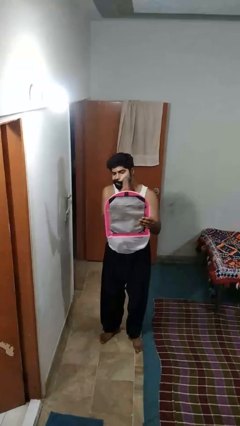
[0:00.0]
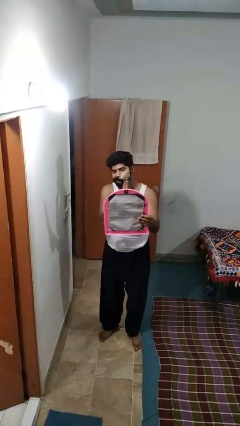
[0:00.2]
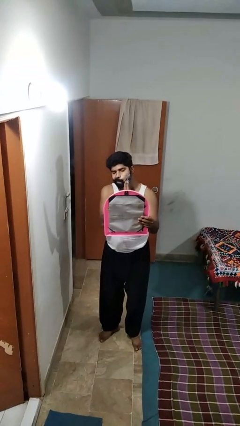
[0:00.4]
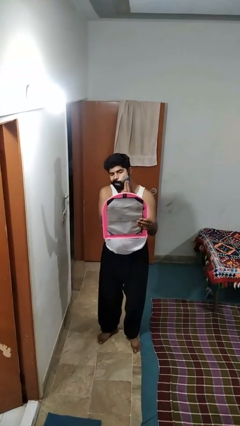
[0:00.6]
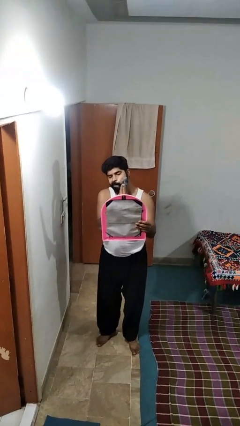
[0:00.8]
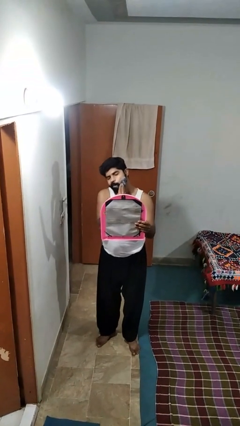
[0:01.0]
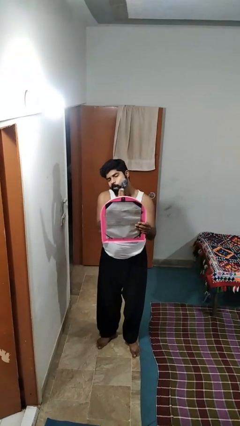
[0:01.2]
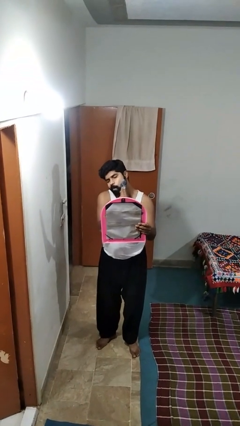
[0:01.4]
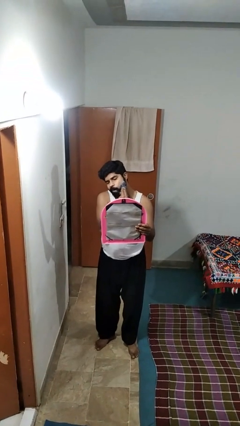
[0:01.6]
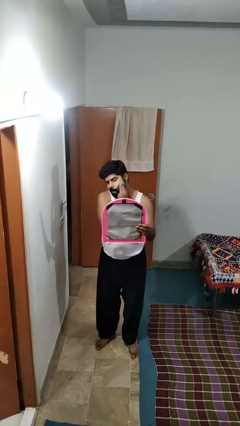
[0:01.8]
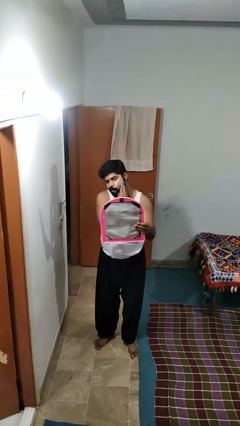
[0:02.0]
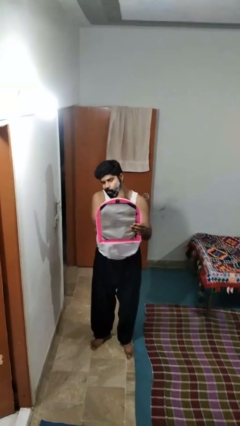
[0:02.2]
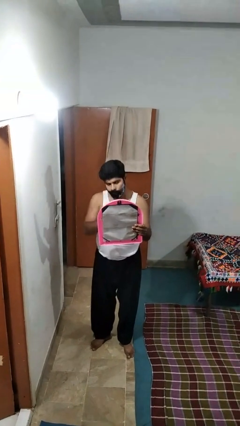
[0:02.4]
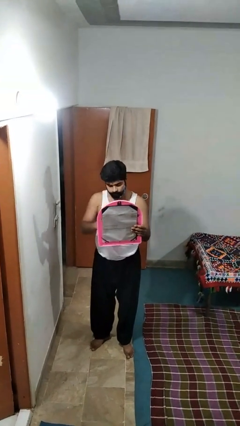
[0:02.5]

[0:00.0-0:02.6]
person applies shaving cream

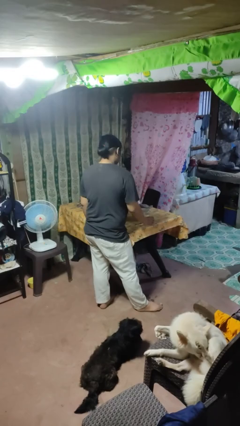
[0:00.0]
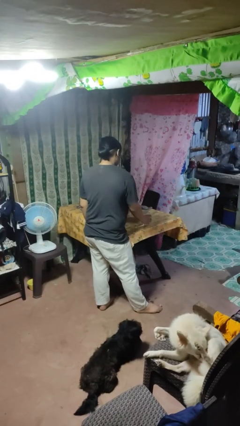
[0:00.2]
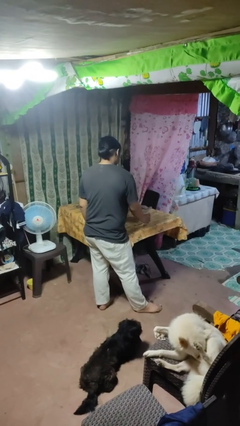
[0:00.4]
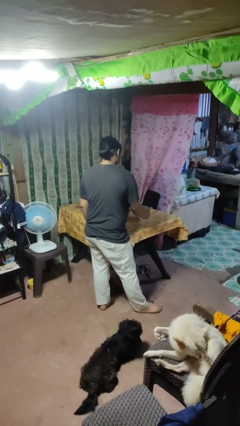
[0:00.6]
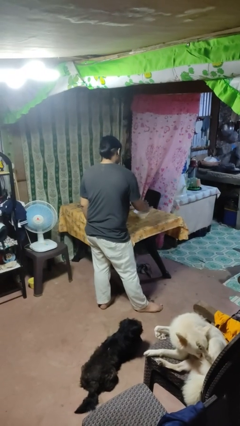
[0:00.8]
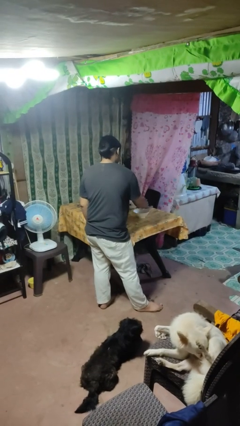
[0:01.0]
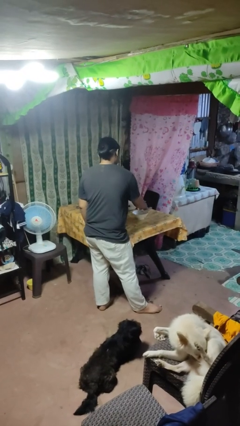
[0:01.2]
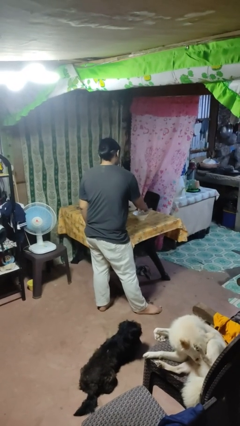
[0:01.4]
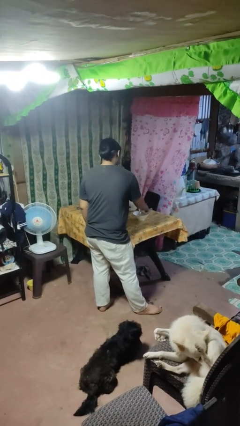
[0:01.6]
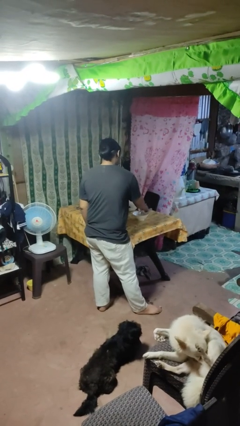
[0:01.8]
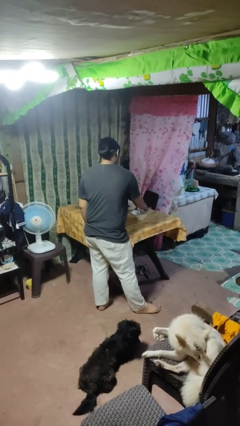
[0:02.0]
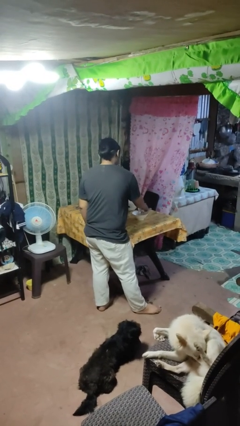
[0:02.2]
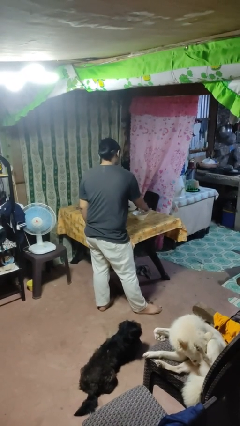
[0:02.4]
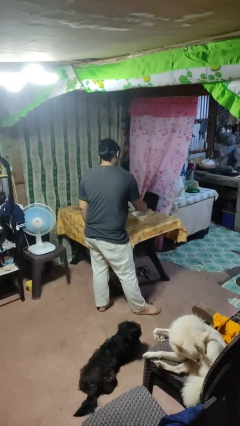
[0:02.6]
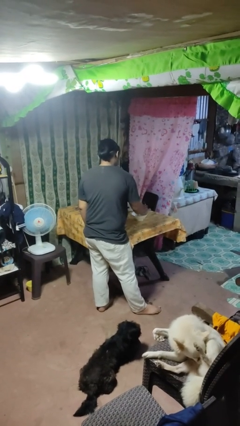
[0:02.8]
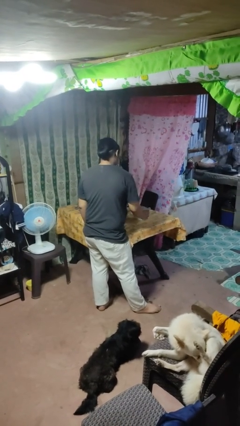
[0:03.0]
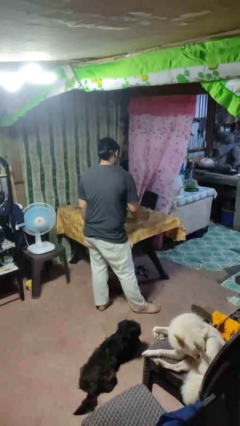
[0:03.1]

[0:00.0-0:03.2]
person pours into bowl

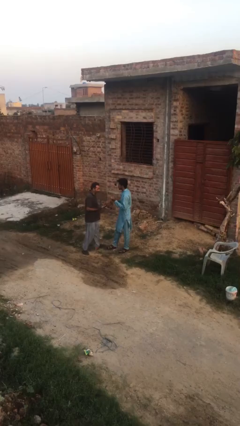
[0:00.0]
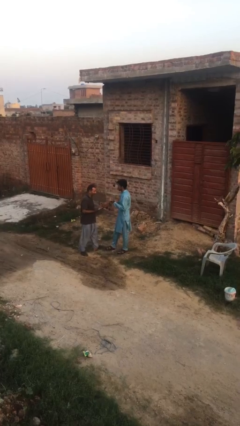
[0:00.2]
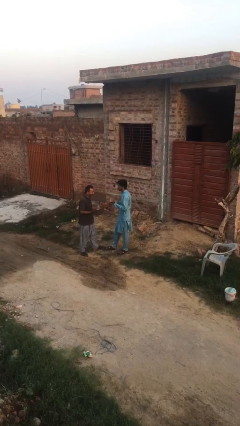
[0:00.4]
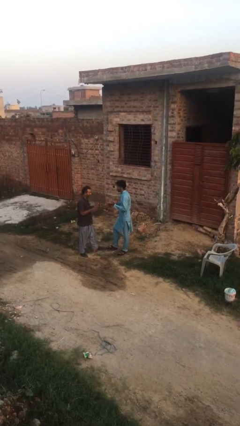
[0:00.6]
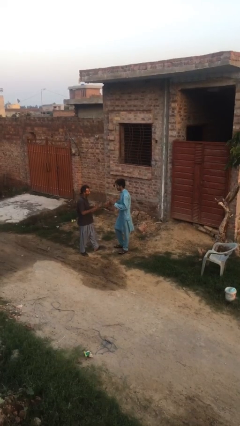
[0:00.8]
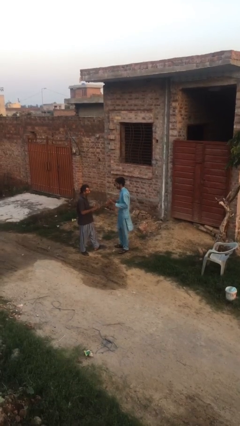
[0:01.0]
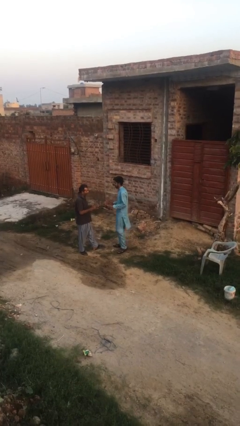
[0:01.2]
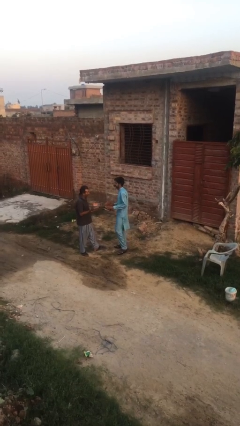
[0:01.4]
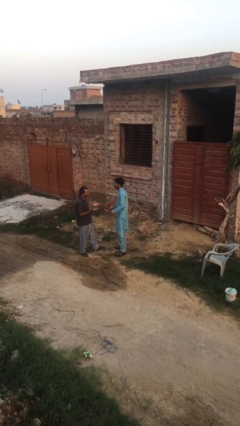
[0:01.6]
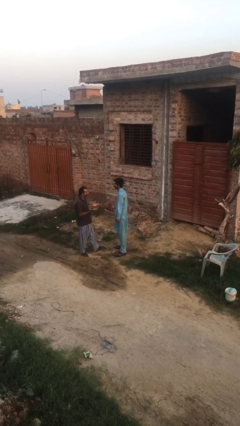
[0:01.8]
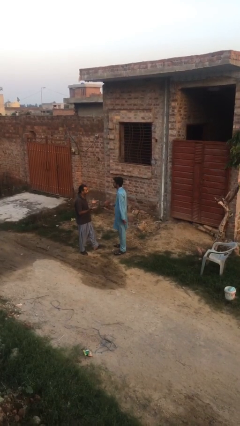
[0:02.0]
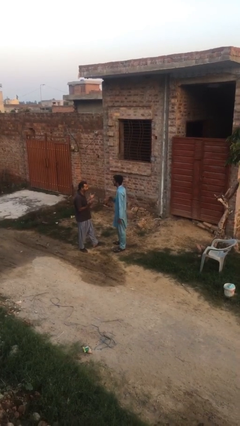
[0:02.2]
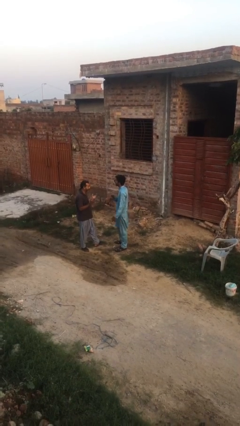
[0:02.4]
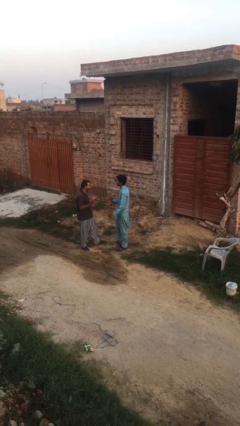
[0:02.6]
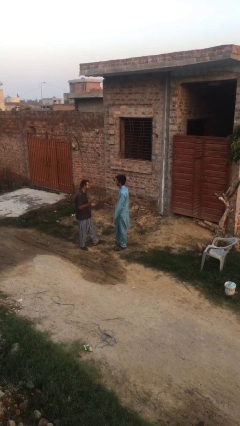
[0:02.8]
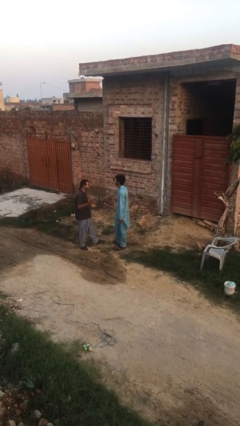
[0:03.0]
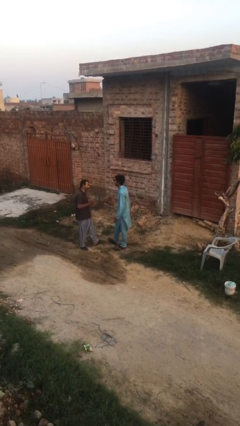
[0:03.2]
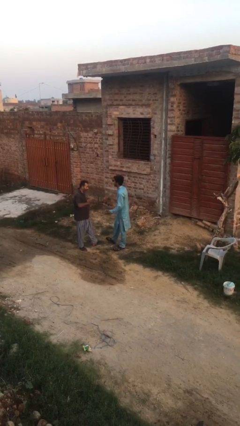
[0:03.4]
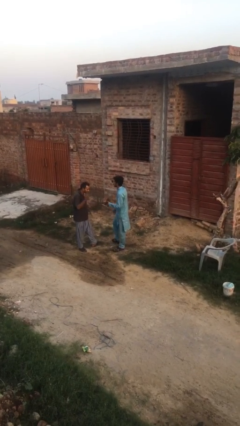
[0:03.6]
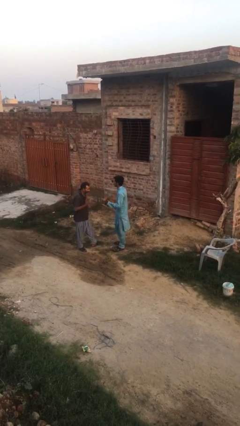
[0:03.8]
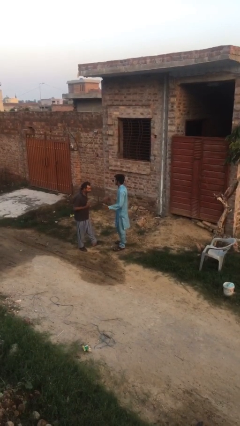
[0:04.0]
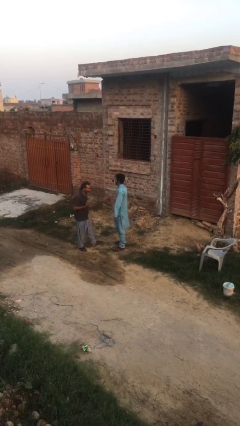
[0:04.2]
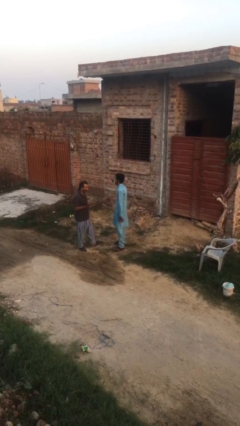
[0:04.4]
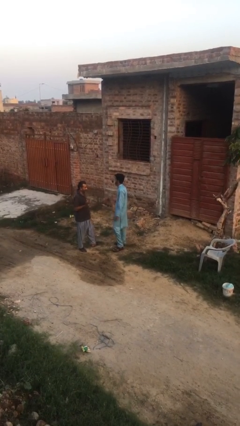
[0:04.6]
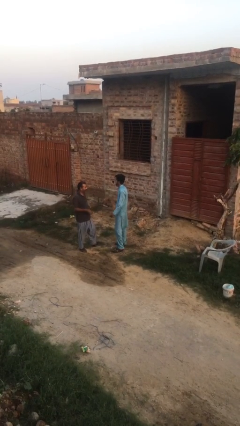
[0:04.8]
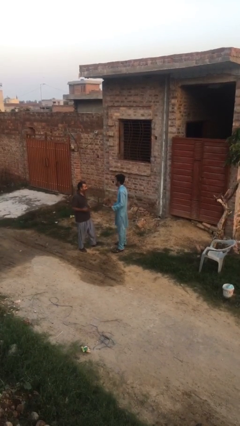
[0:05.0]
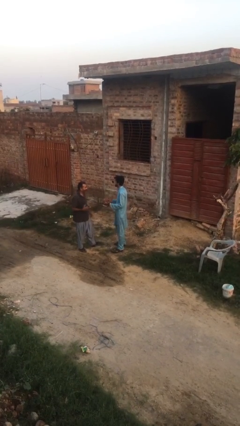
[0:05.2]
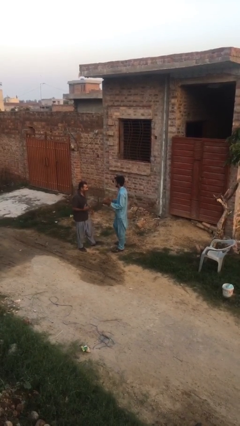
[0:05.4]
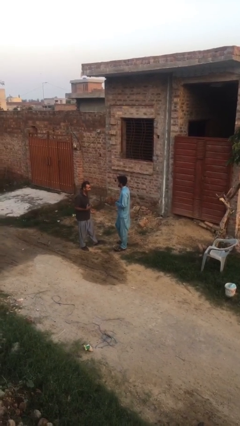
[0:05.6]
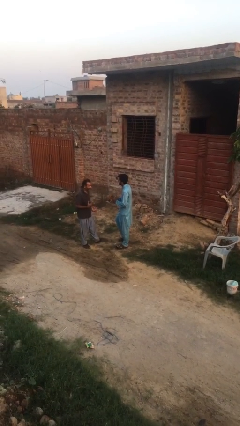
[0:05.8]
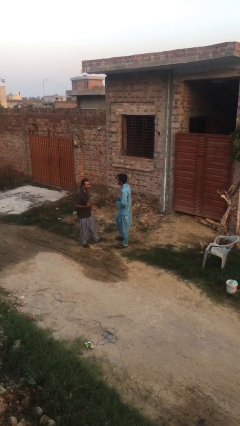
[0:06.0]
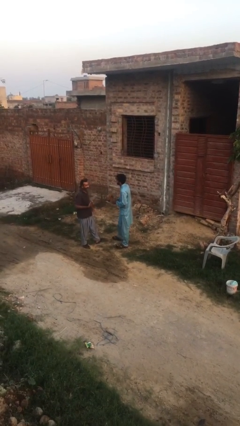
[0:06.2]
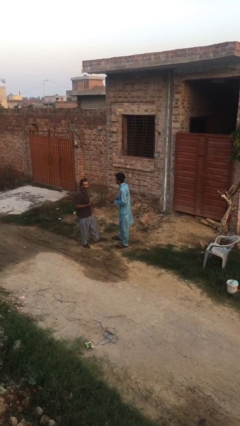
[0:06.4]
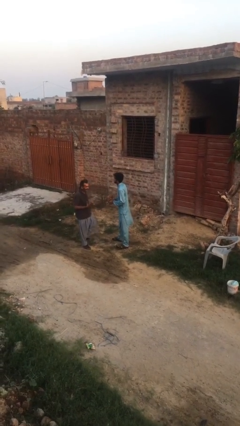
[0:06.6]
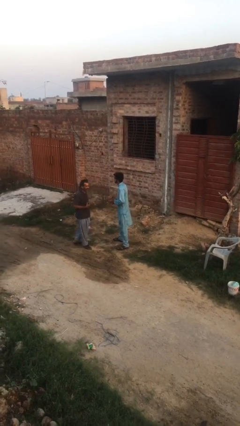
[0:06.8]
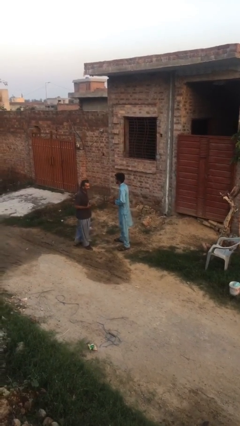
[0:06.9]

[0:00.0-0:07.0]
person talks to person

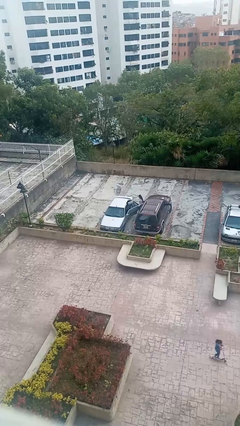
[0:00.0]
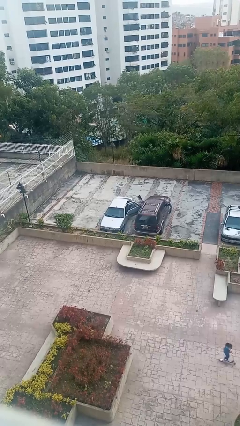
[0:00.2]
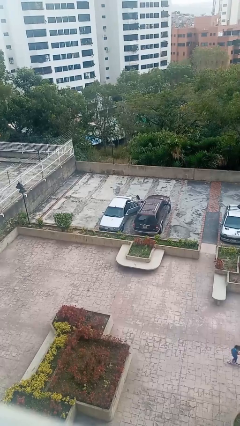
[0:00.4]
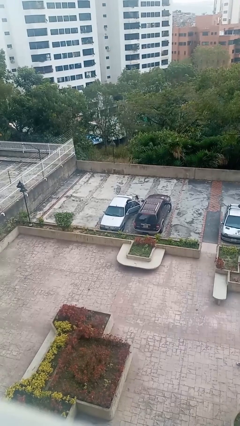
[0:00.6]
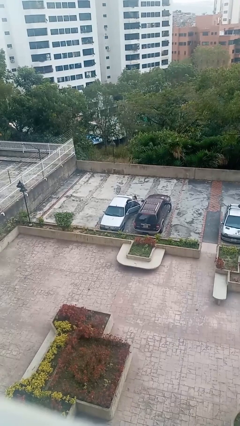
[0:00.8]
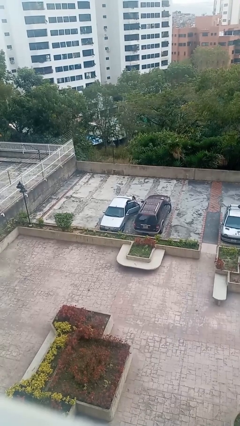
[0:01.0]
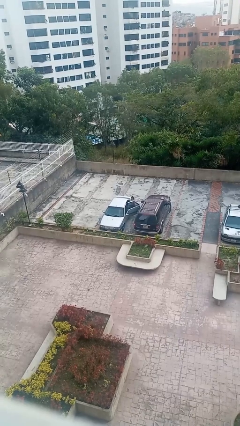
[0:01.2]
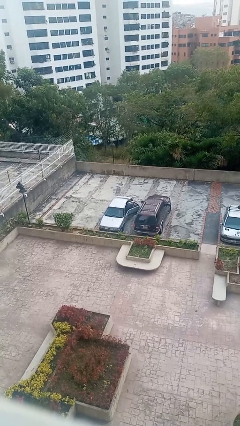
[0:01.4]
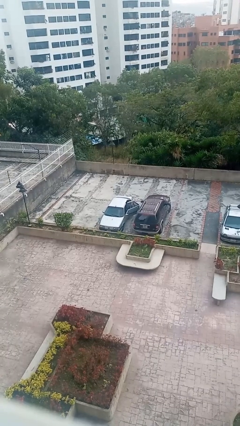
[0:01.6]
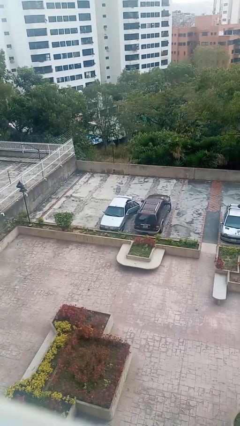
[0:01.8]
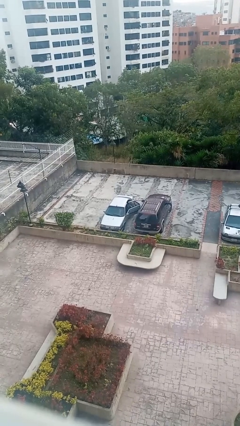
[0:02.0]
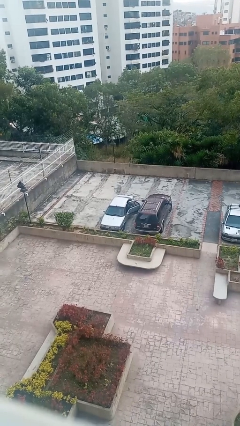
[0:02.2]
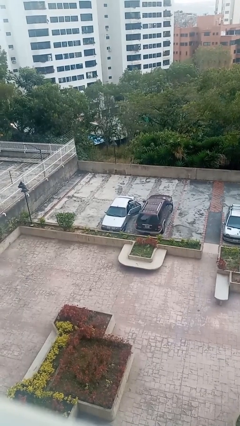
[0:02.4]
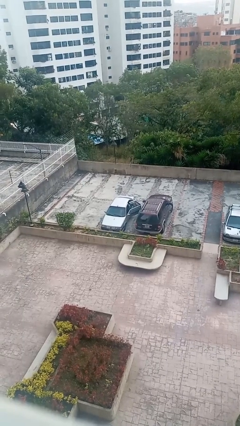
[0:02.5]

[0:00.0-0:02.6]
car picks up person

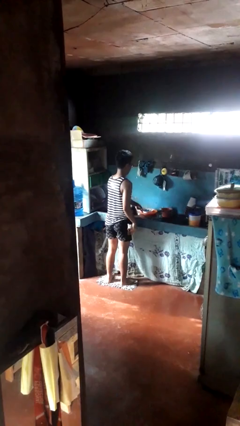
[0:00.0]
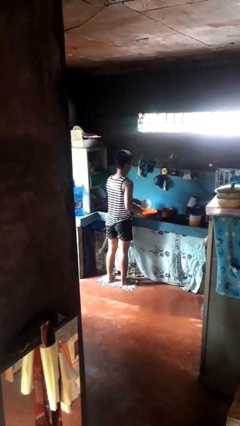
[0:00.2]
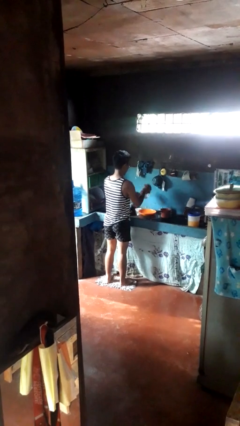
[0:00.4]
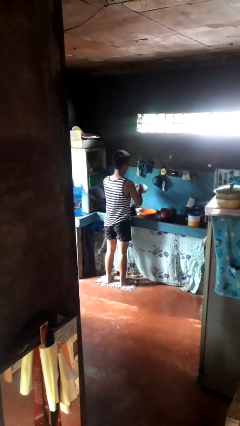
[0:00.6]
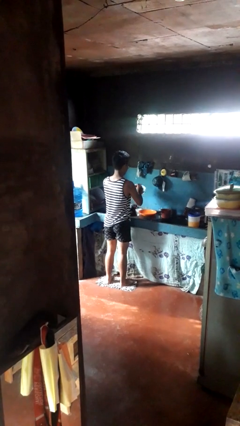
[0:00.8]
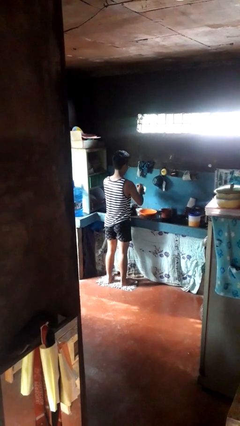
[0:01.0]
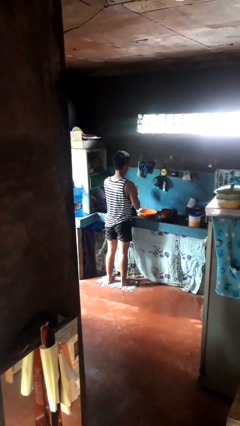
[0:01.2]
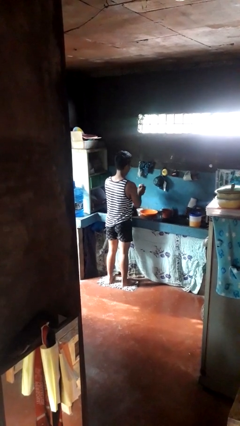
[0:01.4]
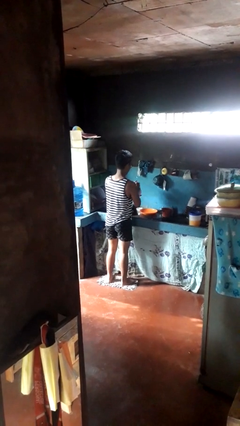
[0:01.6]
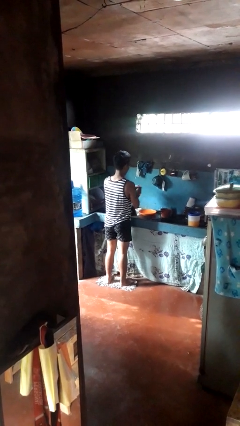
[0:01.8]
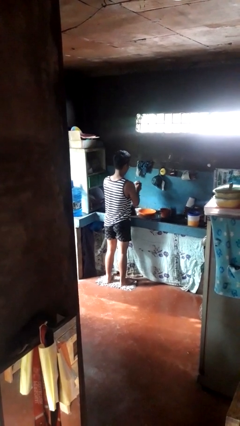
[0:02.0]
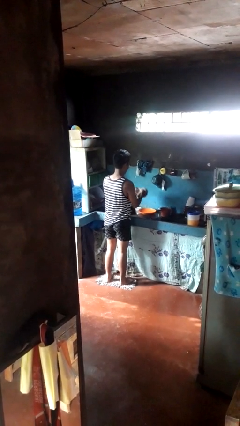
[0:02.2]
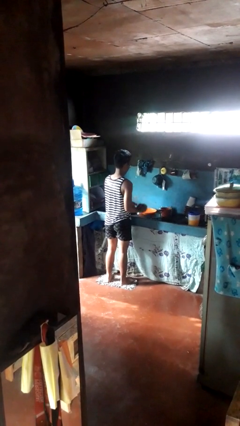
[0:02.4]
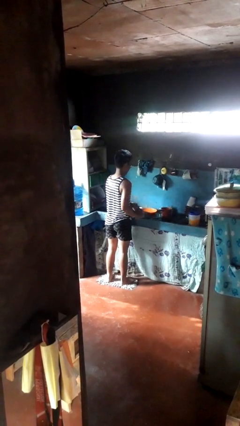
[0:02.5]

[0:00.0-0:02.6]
person dries dish
